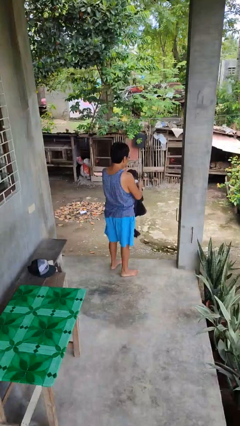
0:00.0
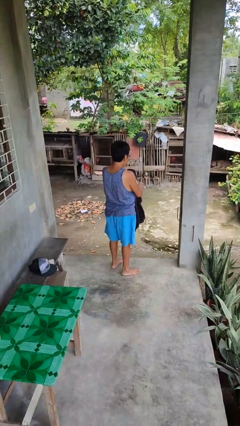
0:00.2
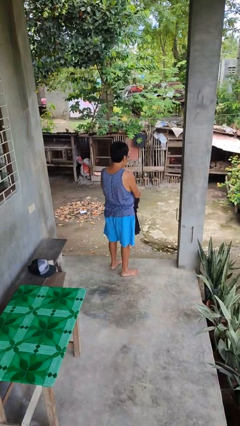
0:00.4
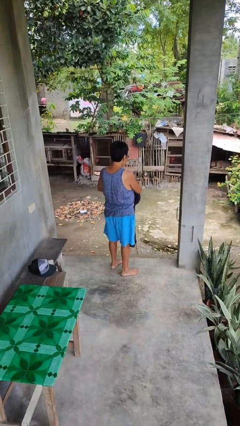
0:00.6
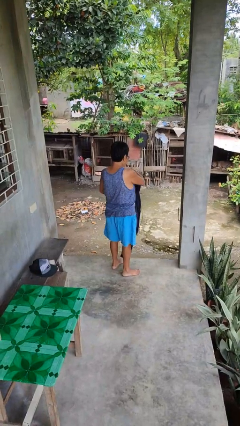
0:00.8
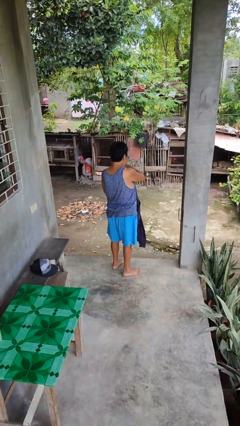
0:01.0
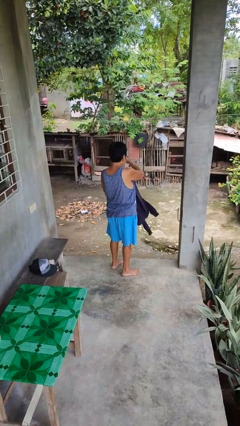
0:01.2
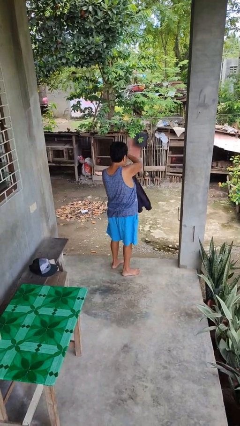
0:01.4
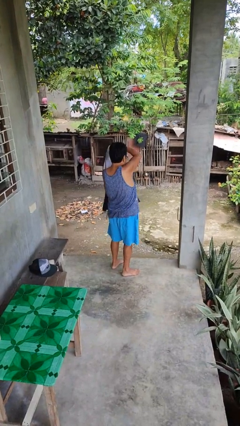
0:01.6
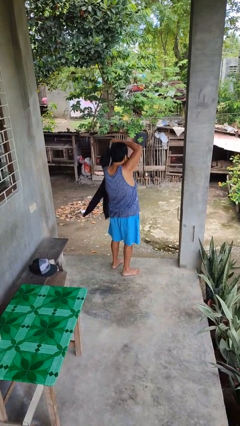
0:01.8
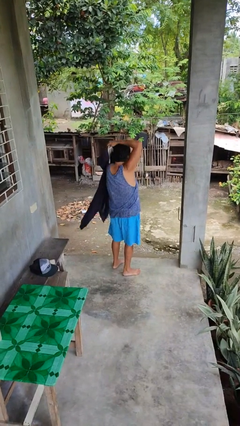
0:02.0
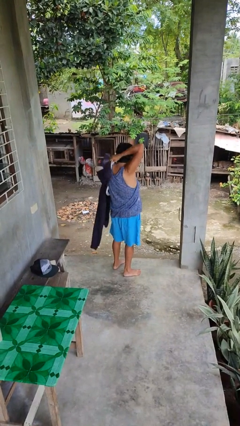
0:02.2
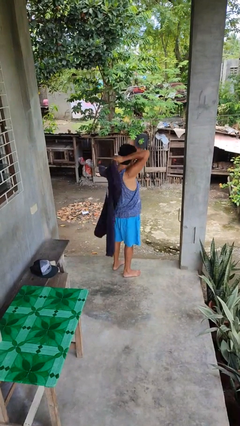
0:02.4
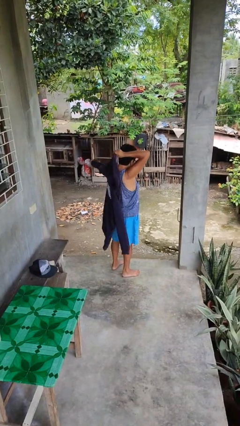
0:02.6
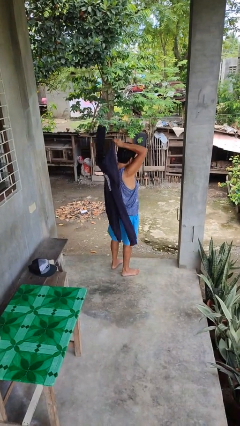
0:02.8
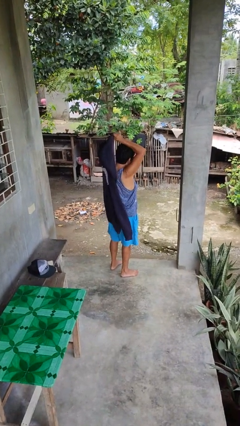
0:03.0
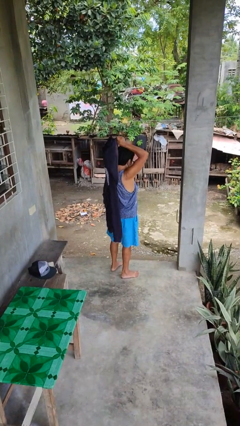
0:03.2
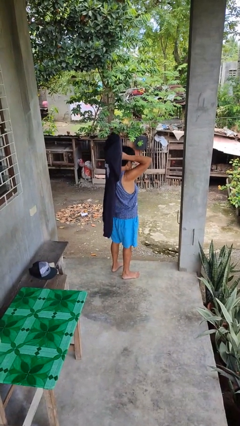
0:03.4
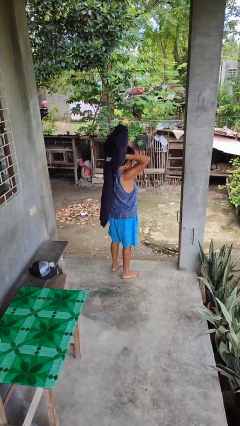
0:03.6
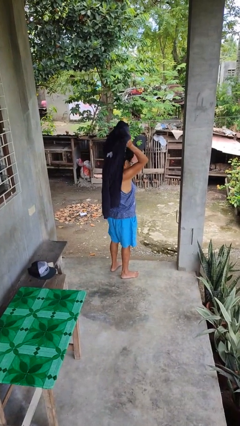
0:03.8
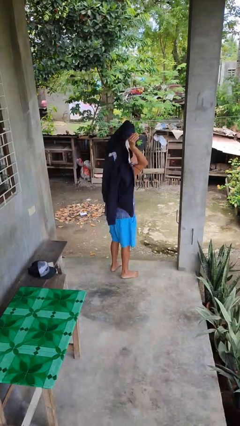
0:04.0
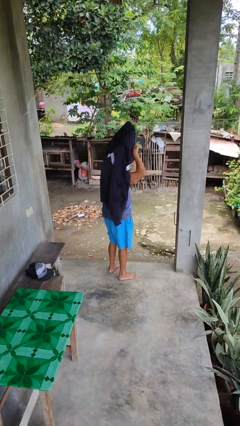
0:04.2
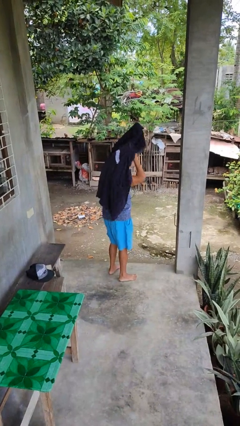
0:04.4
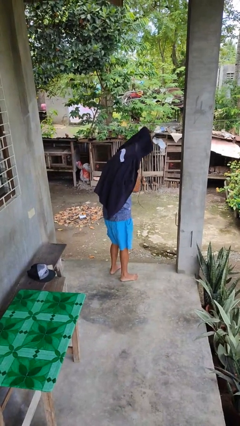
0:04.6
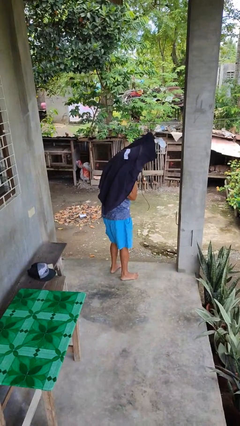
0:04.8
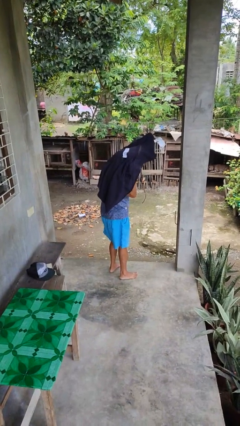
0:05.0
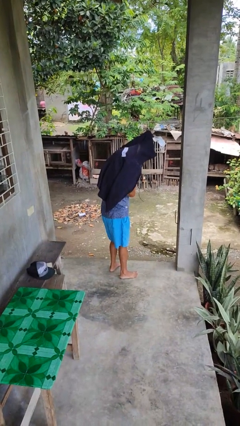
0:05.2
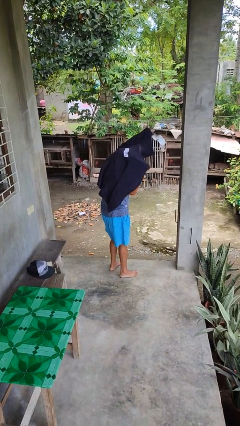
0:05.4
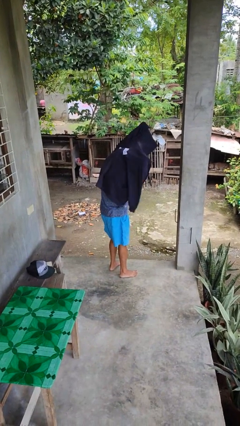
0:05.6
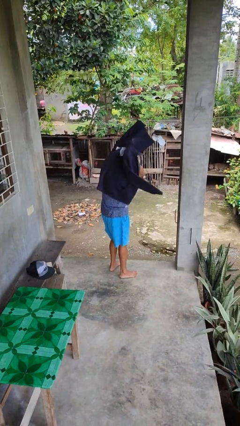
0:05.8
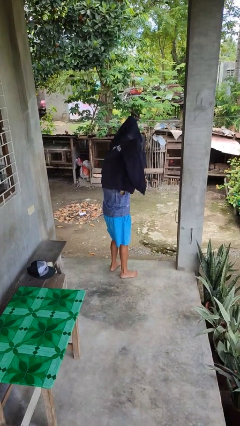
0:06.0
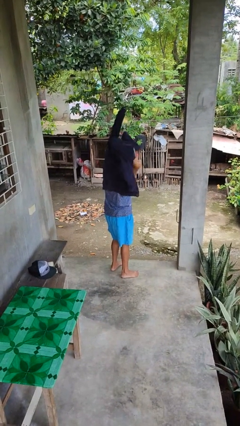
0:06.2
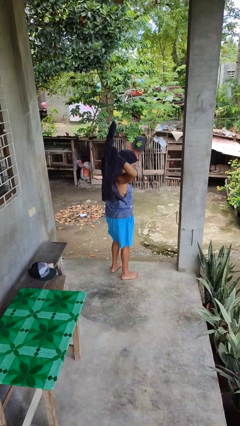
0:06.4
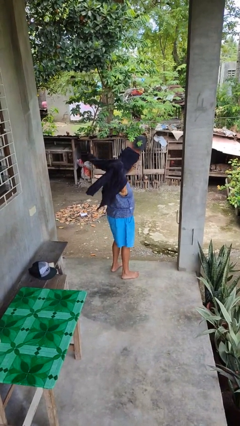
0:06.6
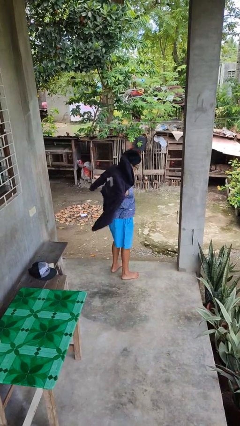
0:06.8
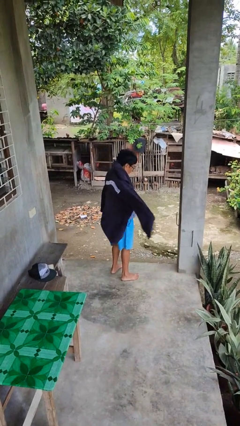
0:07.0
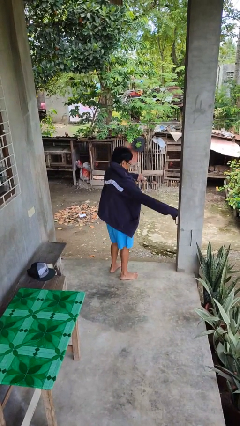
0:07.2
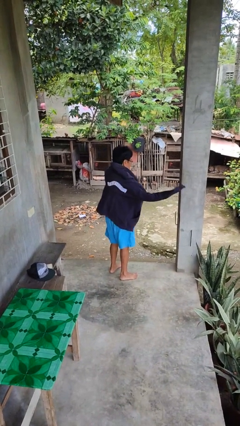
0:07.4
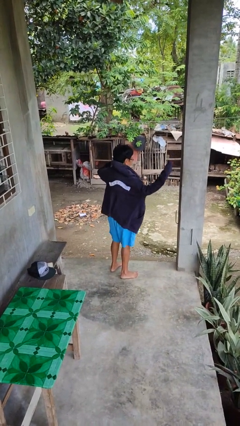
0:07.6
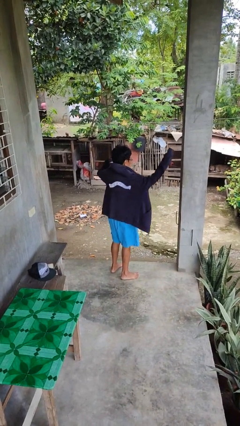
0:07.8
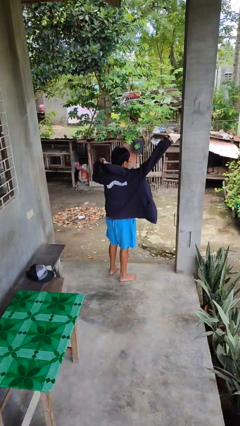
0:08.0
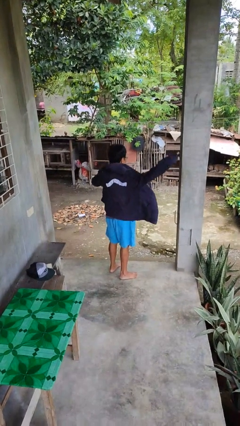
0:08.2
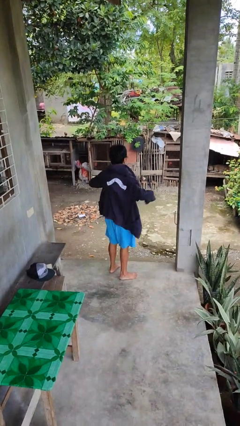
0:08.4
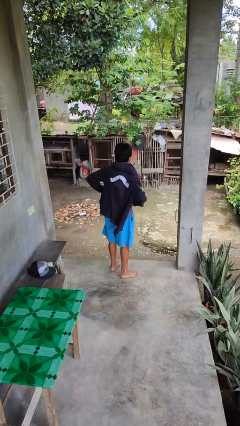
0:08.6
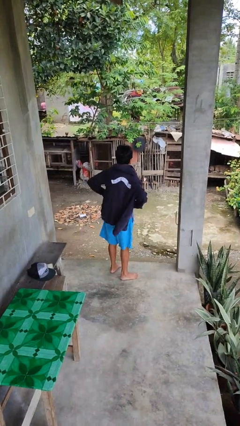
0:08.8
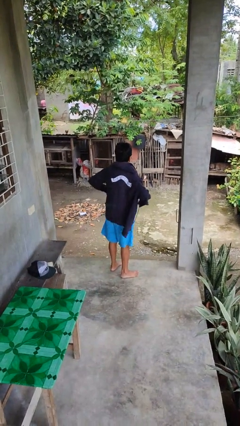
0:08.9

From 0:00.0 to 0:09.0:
person puts on jacket

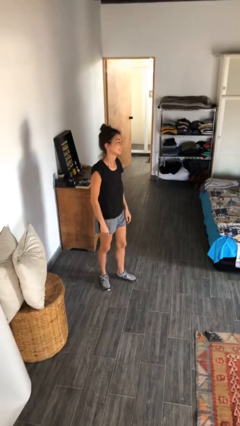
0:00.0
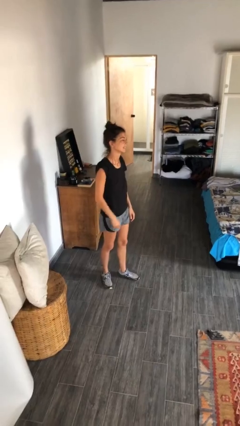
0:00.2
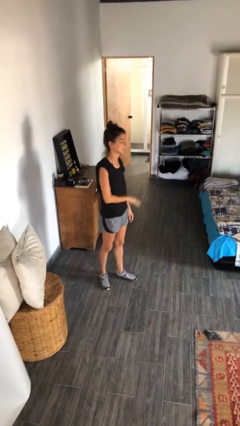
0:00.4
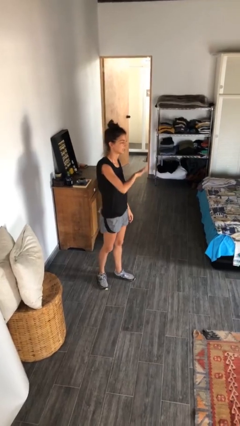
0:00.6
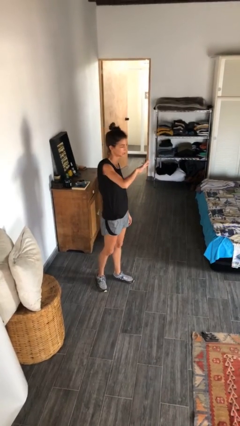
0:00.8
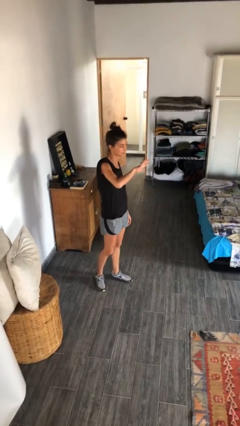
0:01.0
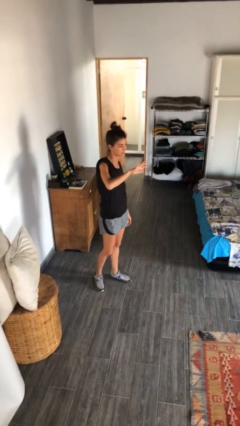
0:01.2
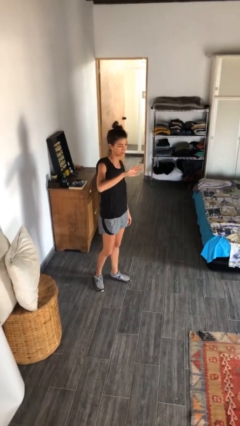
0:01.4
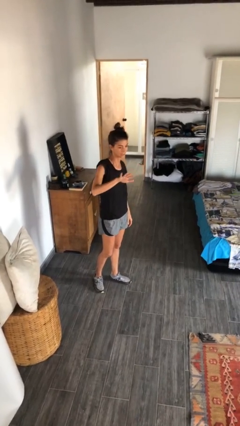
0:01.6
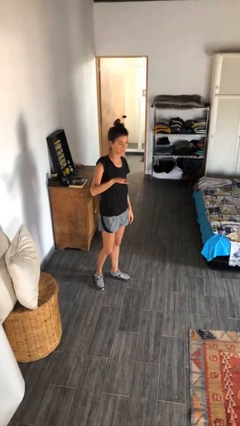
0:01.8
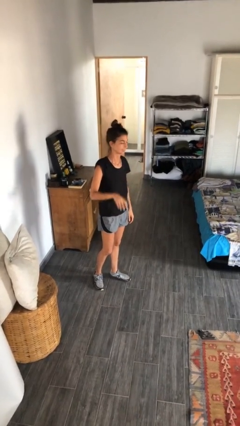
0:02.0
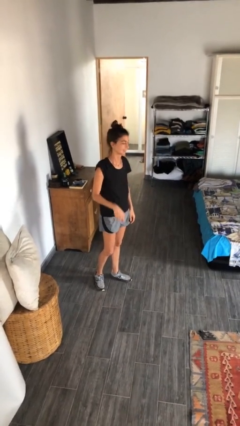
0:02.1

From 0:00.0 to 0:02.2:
person gestures swipe right

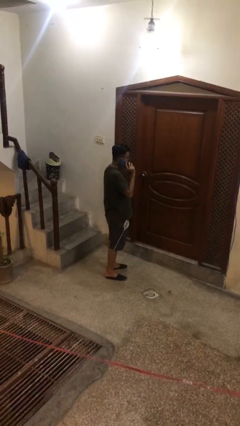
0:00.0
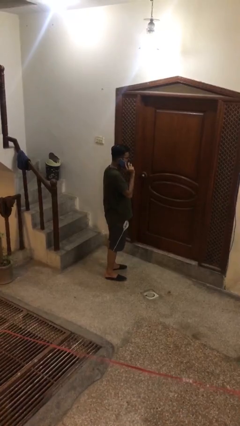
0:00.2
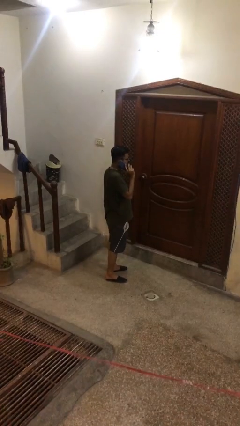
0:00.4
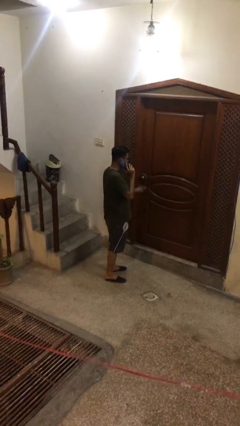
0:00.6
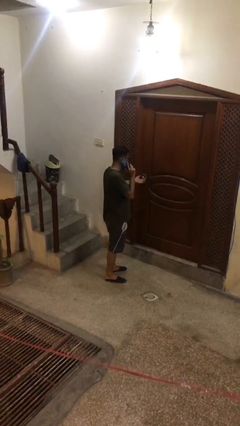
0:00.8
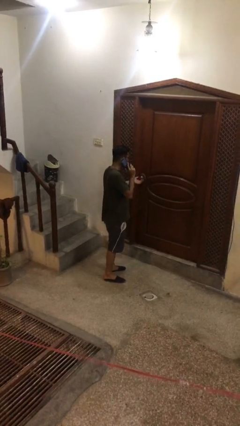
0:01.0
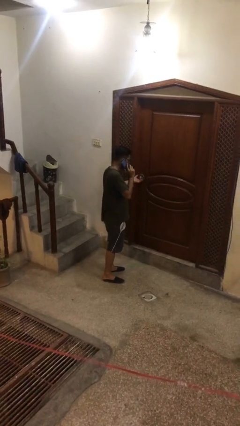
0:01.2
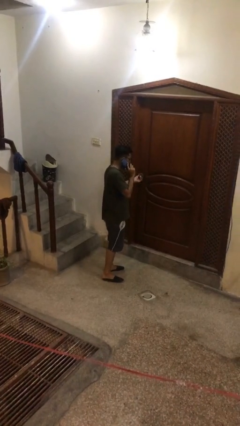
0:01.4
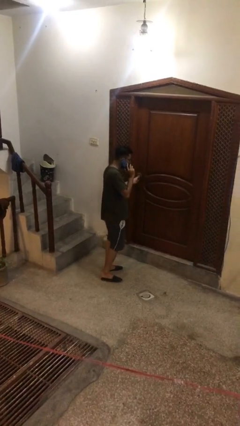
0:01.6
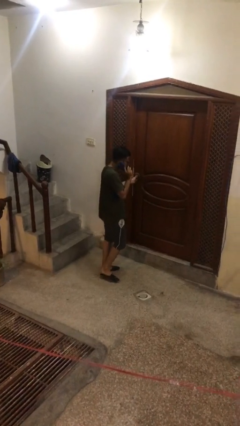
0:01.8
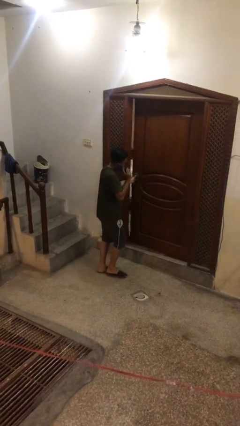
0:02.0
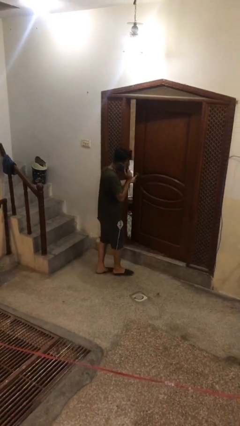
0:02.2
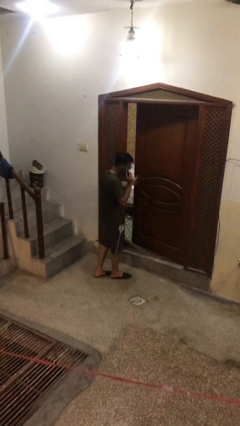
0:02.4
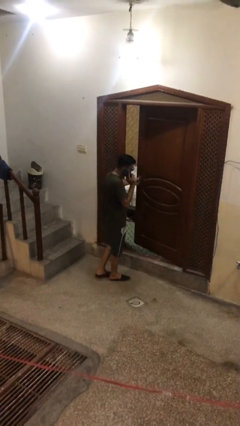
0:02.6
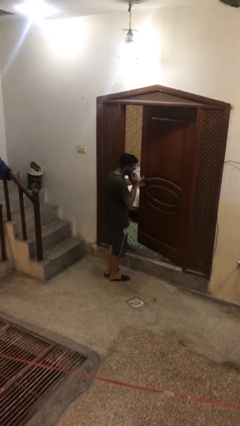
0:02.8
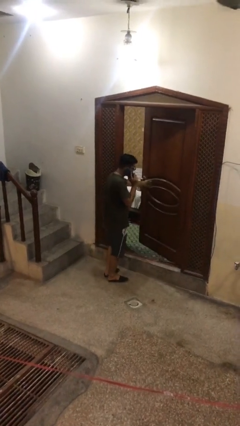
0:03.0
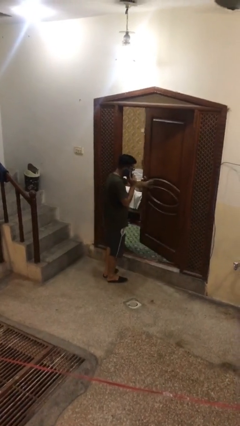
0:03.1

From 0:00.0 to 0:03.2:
person opens facility door

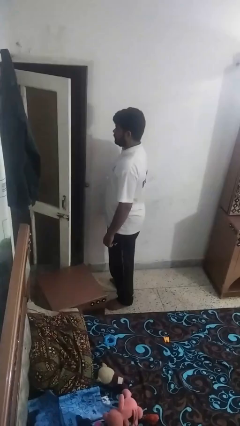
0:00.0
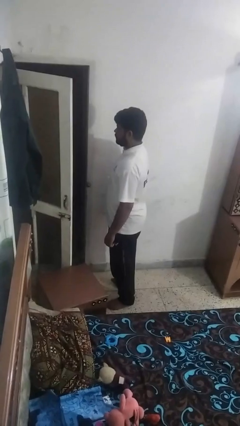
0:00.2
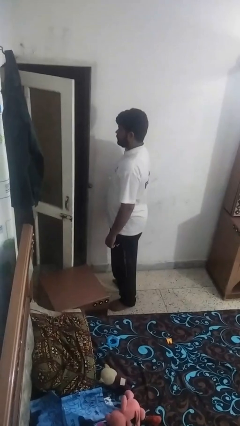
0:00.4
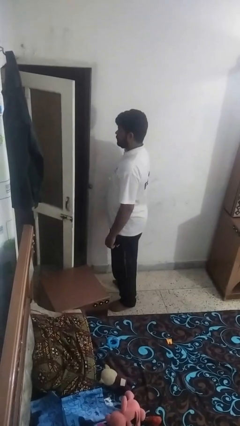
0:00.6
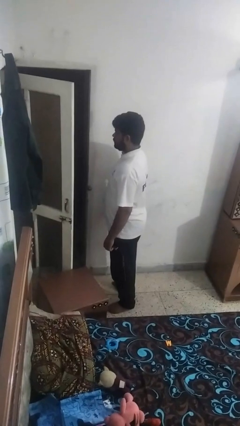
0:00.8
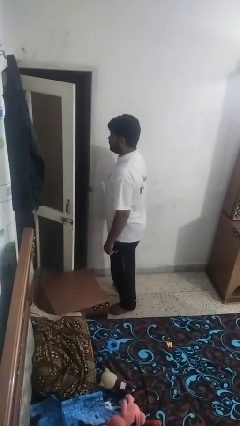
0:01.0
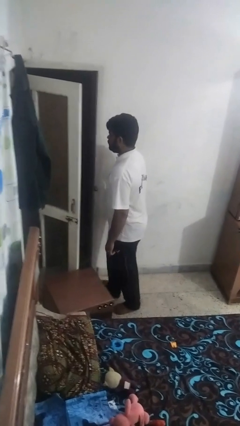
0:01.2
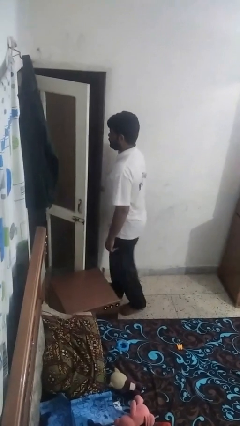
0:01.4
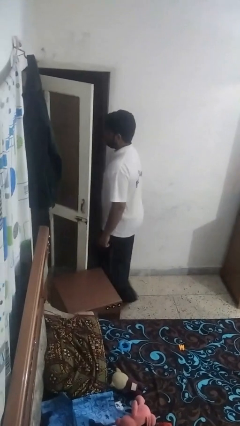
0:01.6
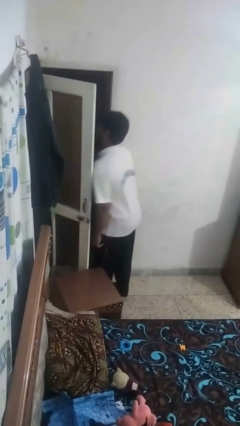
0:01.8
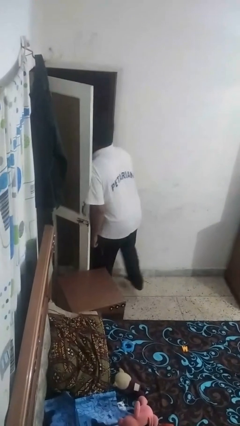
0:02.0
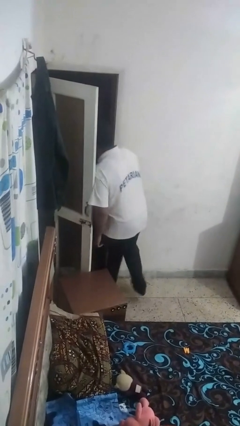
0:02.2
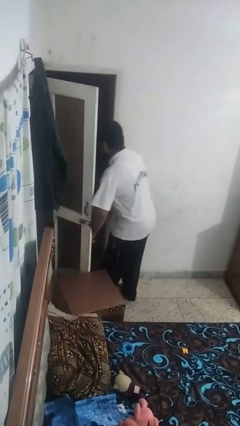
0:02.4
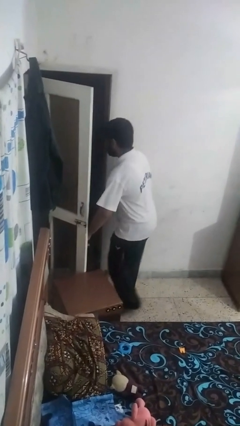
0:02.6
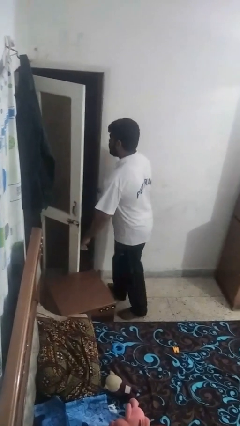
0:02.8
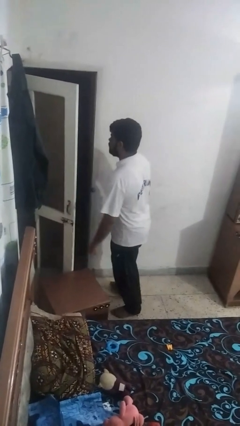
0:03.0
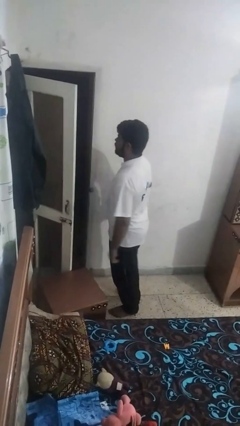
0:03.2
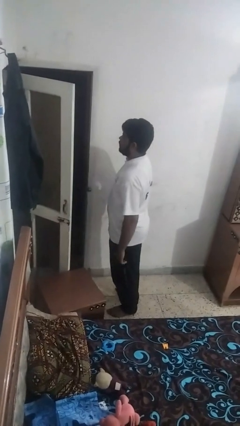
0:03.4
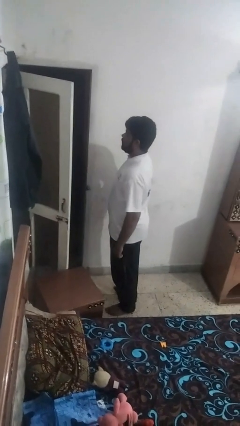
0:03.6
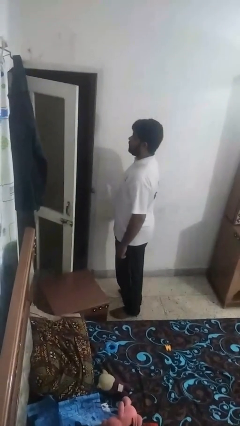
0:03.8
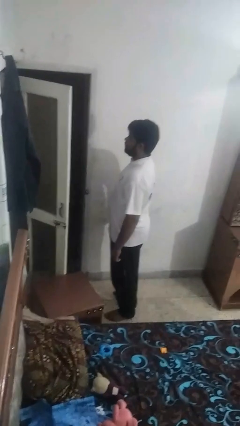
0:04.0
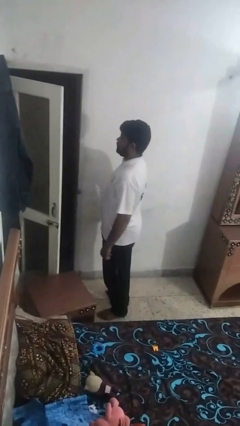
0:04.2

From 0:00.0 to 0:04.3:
person bumps into wall
